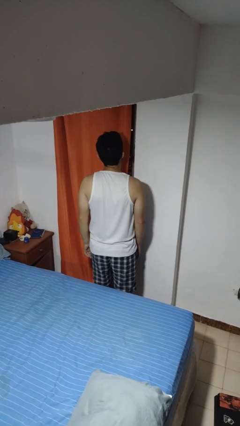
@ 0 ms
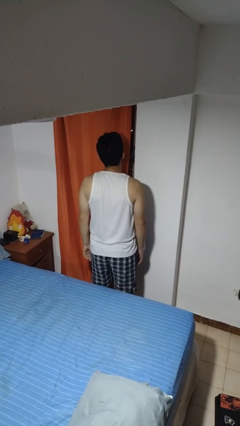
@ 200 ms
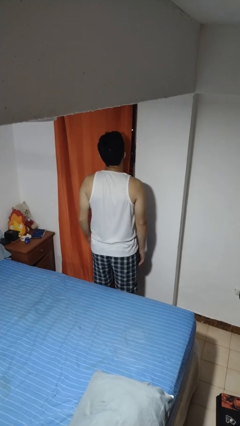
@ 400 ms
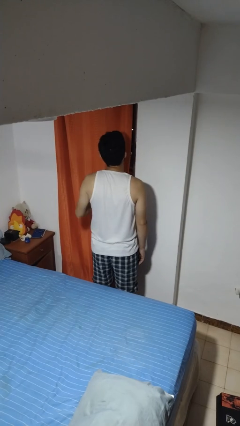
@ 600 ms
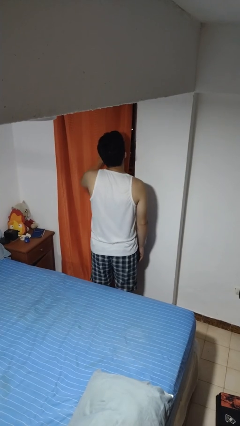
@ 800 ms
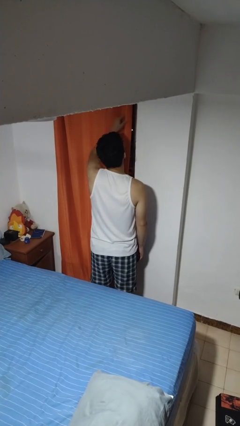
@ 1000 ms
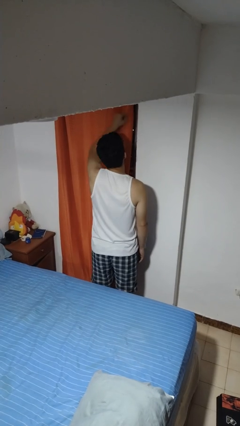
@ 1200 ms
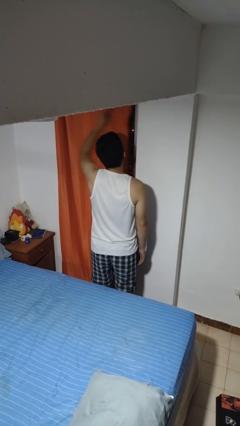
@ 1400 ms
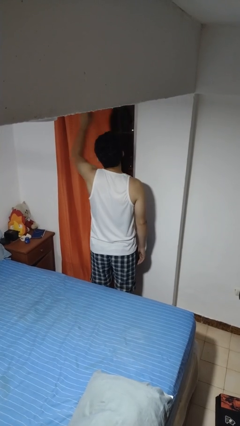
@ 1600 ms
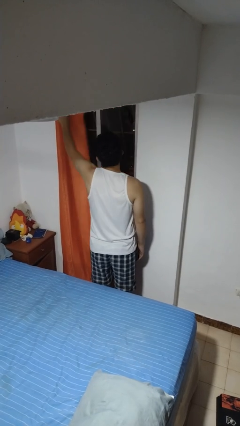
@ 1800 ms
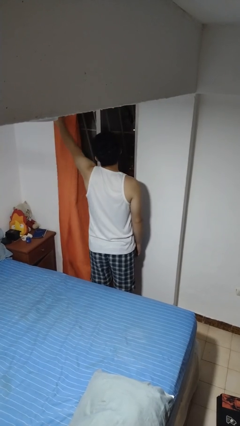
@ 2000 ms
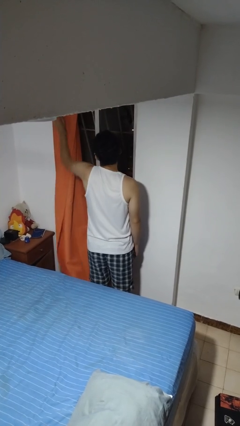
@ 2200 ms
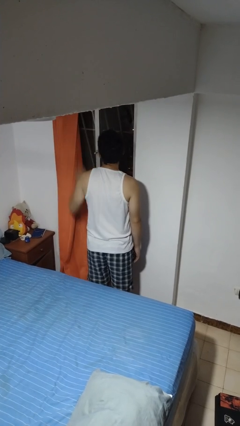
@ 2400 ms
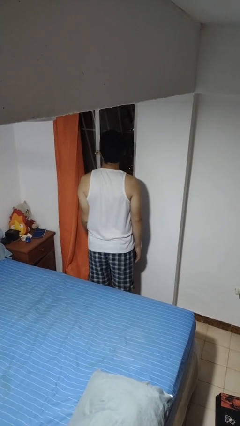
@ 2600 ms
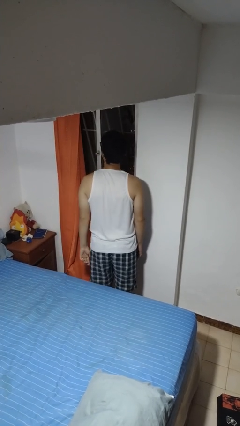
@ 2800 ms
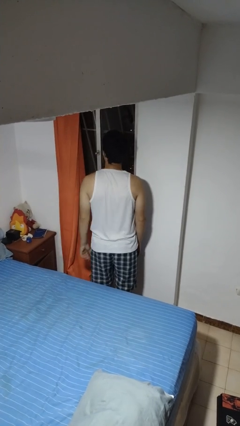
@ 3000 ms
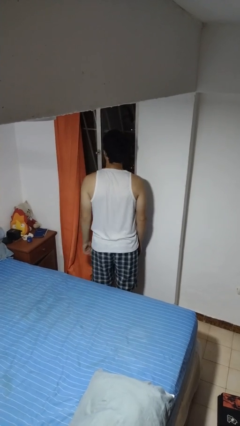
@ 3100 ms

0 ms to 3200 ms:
person opens curtains

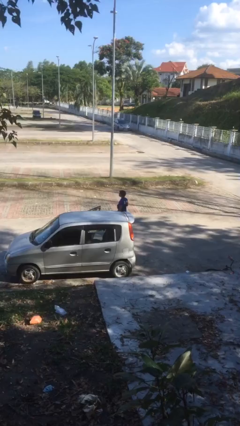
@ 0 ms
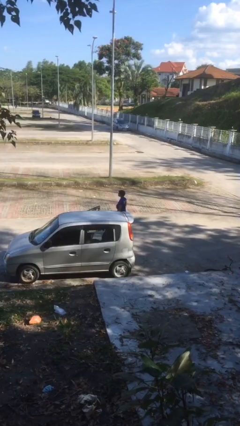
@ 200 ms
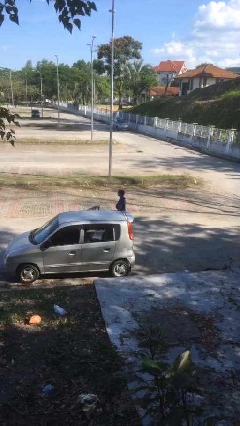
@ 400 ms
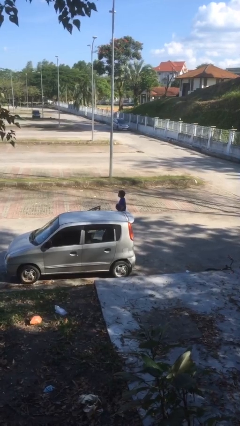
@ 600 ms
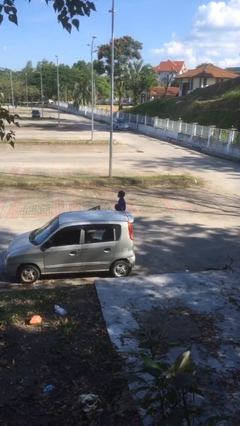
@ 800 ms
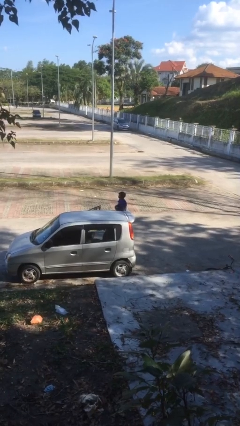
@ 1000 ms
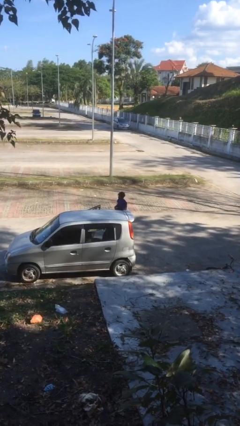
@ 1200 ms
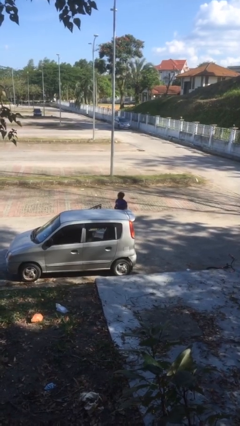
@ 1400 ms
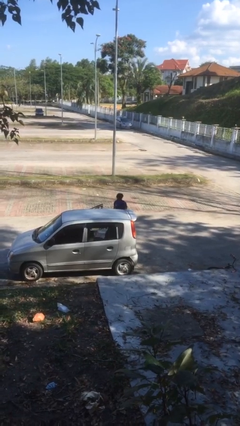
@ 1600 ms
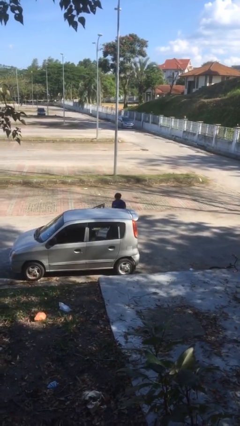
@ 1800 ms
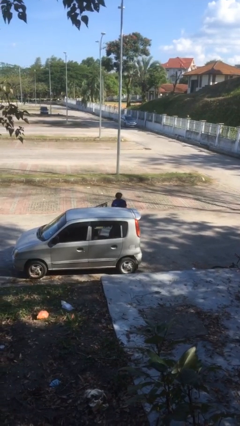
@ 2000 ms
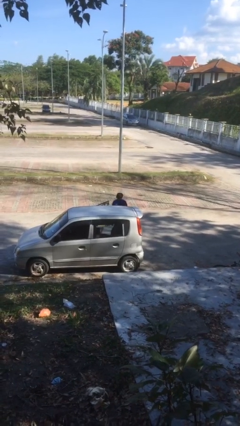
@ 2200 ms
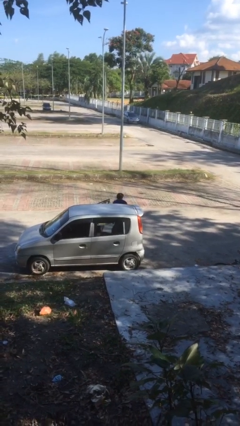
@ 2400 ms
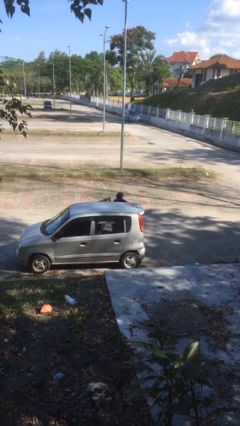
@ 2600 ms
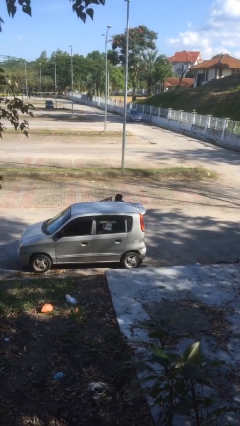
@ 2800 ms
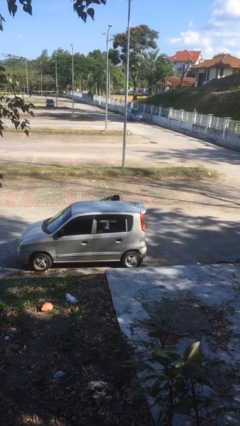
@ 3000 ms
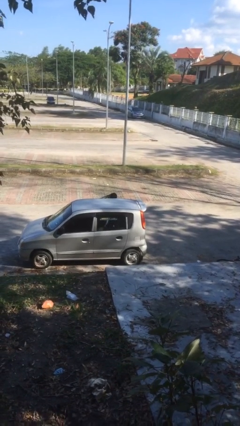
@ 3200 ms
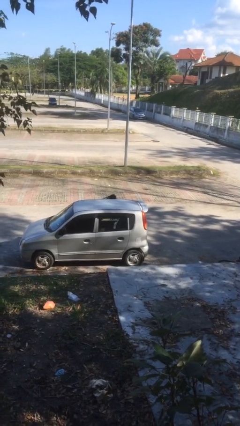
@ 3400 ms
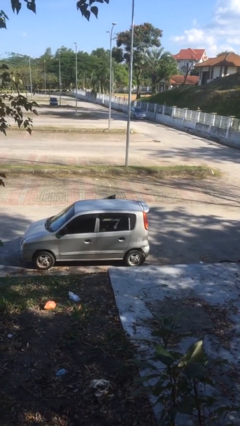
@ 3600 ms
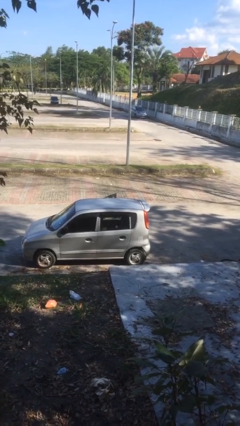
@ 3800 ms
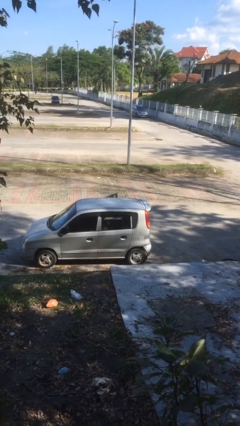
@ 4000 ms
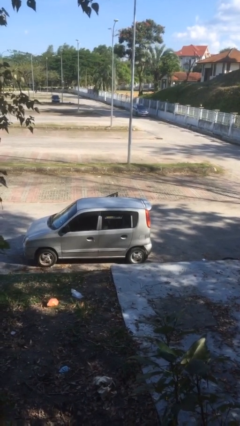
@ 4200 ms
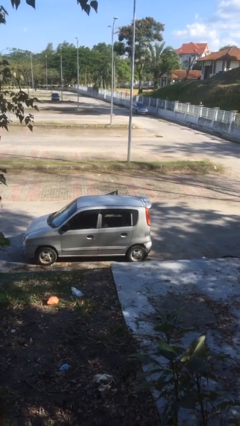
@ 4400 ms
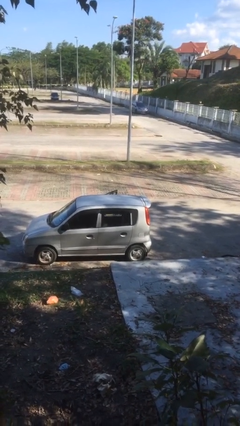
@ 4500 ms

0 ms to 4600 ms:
person enters car

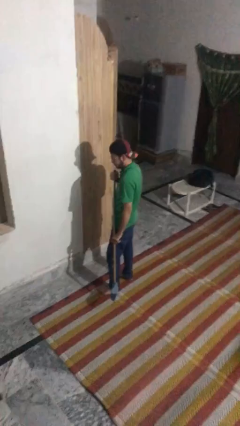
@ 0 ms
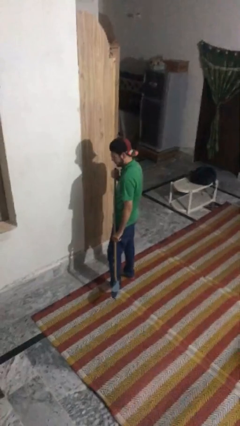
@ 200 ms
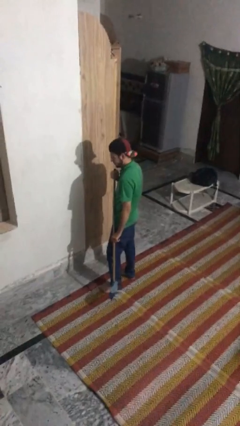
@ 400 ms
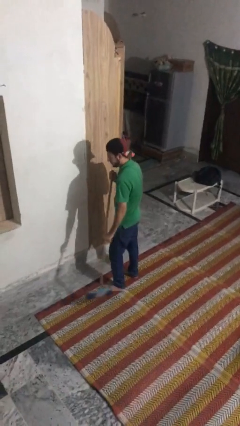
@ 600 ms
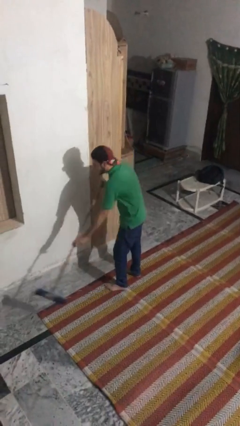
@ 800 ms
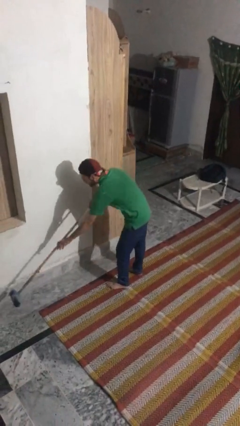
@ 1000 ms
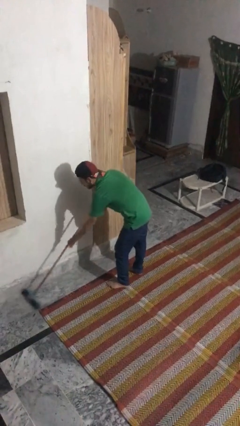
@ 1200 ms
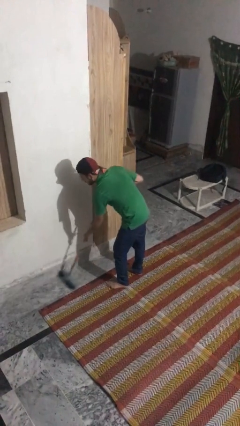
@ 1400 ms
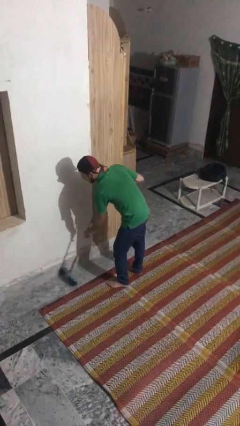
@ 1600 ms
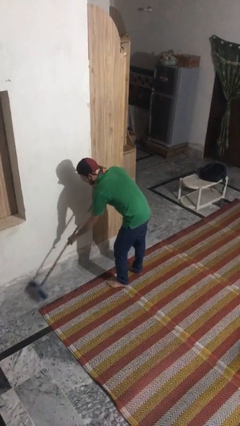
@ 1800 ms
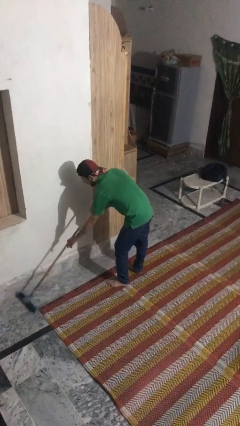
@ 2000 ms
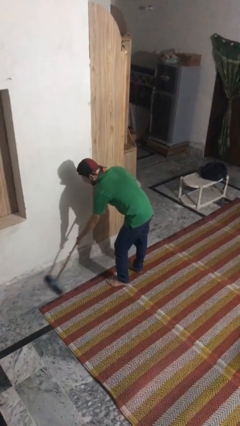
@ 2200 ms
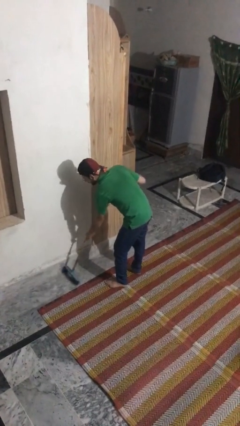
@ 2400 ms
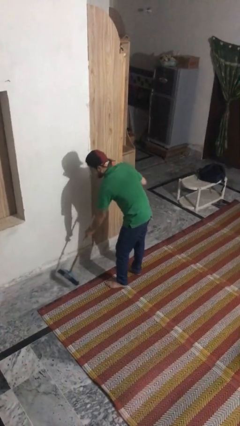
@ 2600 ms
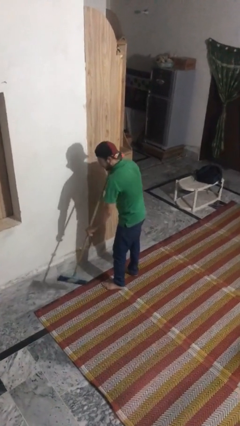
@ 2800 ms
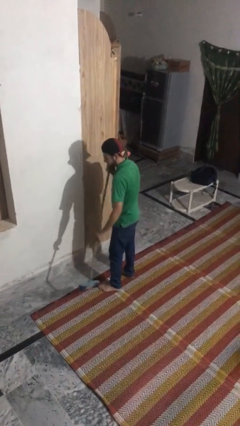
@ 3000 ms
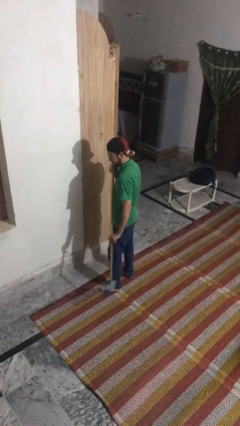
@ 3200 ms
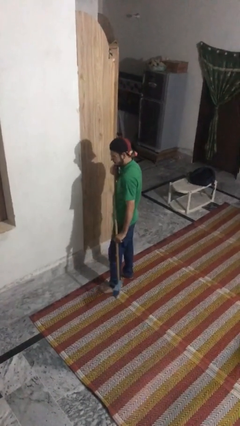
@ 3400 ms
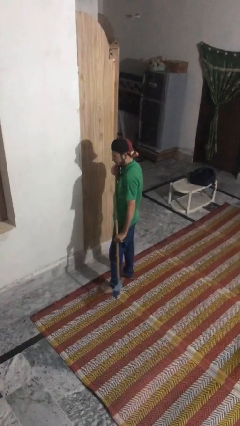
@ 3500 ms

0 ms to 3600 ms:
person sweeps floor

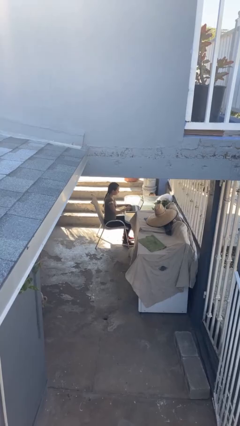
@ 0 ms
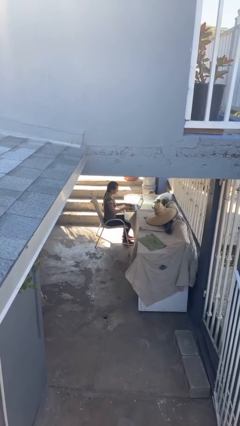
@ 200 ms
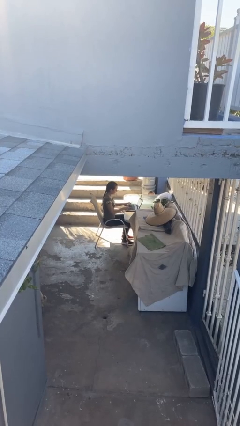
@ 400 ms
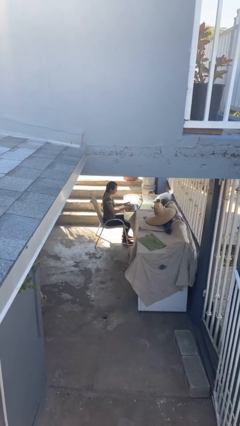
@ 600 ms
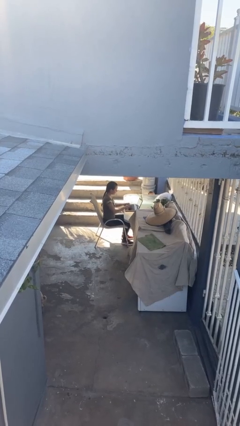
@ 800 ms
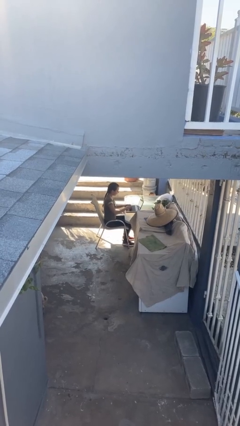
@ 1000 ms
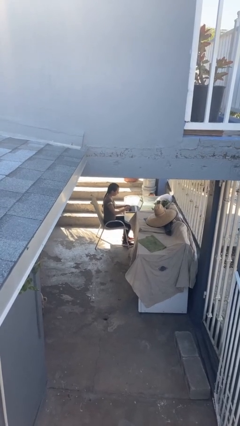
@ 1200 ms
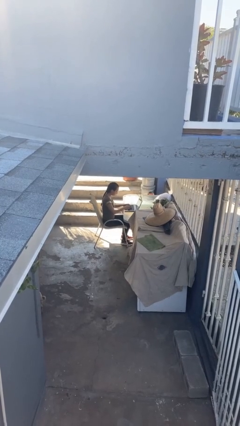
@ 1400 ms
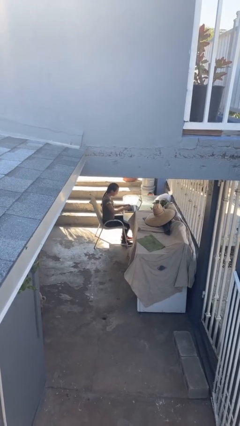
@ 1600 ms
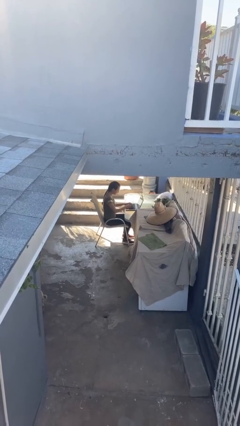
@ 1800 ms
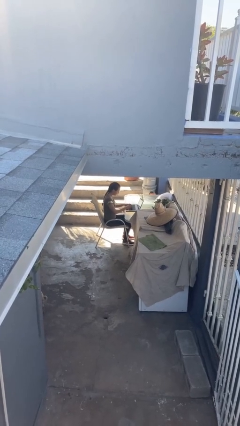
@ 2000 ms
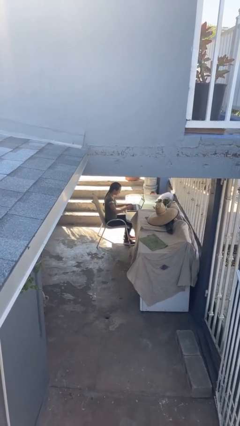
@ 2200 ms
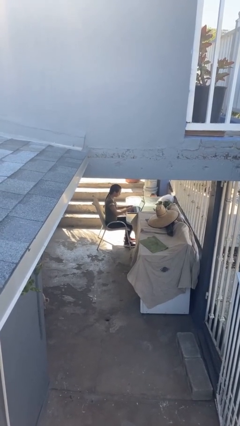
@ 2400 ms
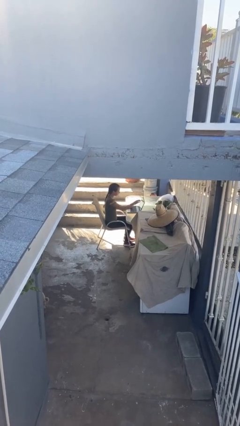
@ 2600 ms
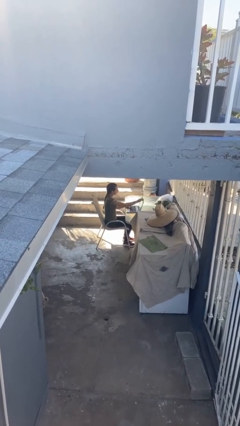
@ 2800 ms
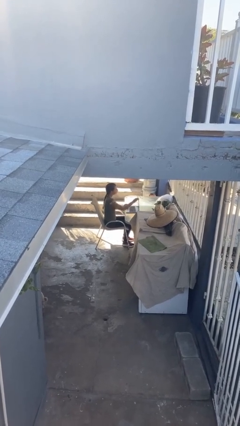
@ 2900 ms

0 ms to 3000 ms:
person interacts with laptop

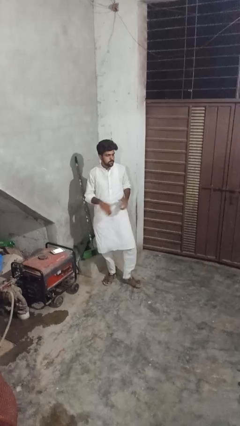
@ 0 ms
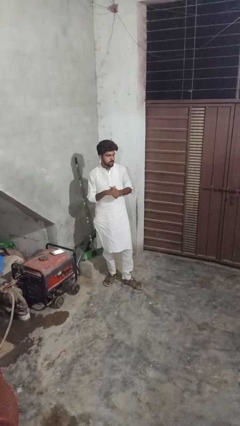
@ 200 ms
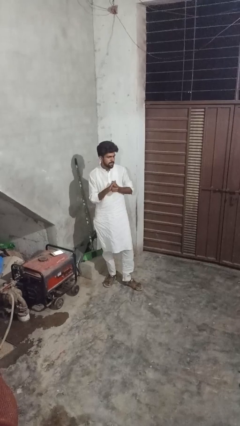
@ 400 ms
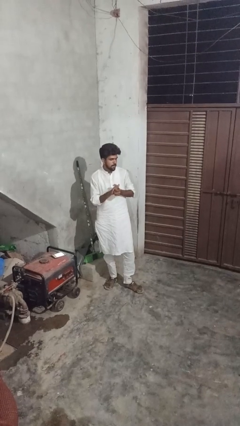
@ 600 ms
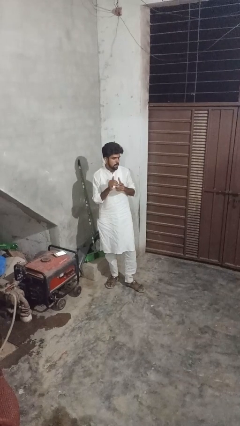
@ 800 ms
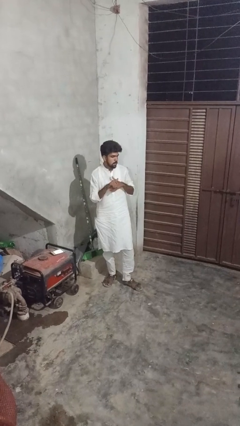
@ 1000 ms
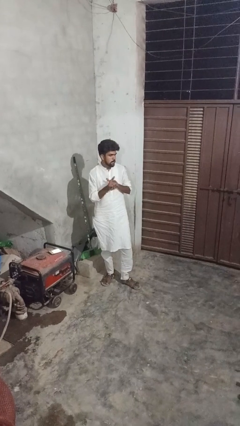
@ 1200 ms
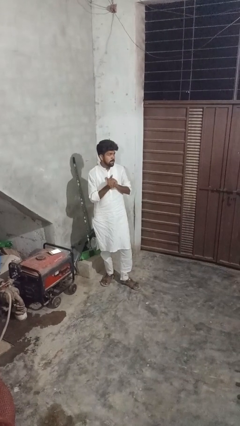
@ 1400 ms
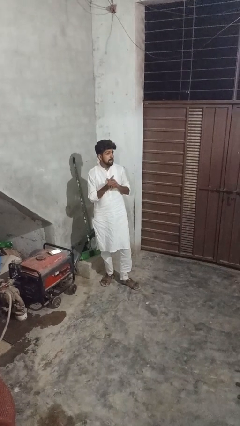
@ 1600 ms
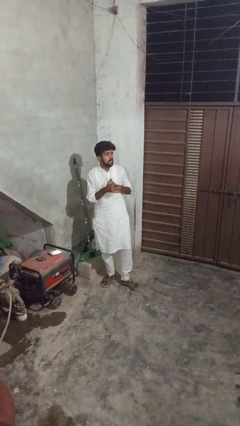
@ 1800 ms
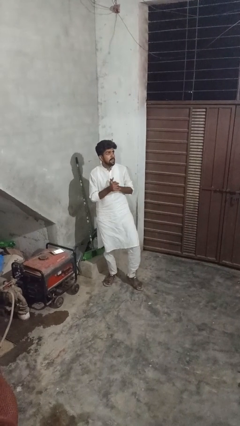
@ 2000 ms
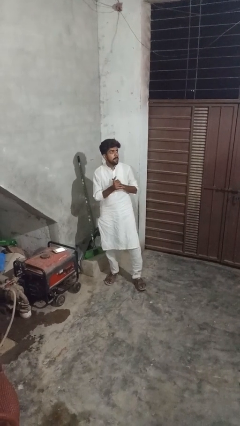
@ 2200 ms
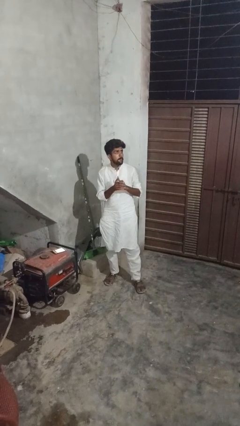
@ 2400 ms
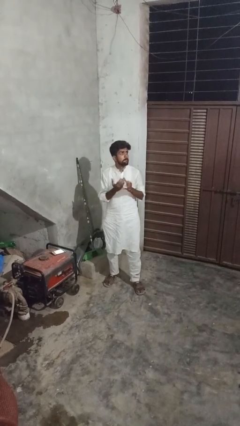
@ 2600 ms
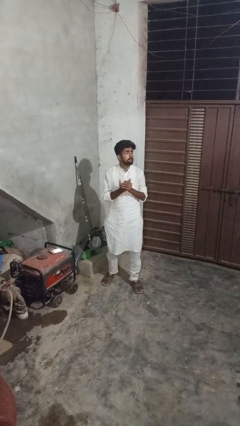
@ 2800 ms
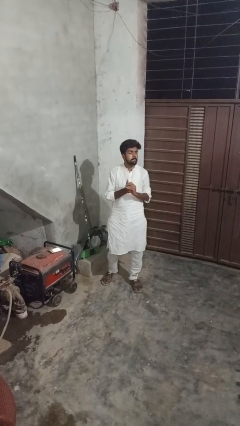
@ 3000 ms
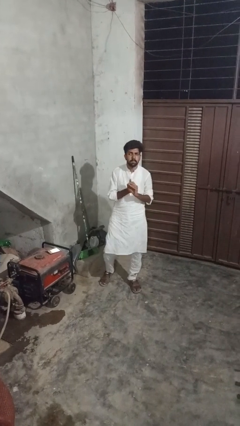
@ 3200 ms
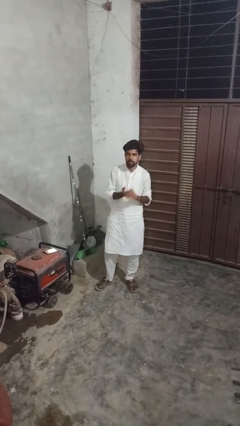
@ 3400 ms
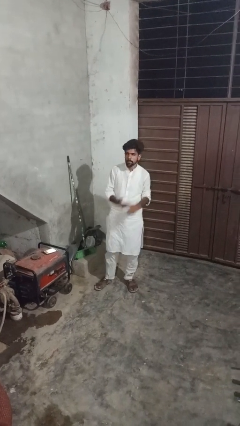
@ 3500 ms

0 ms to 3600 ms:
person cracks knuckles
